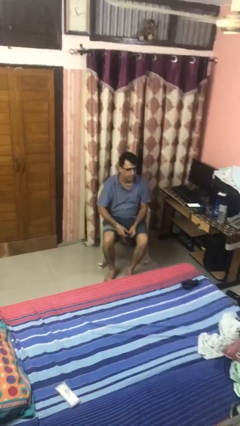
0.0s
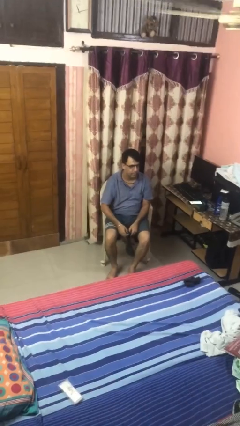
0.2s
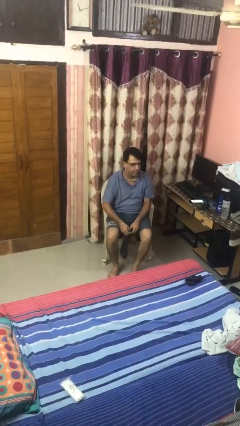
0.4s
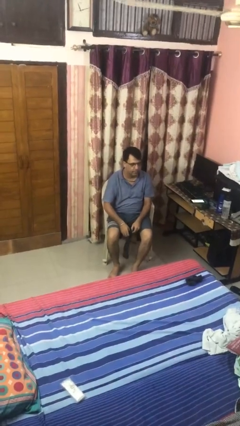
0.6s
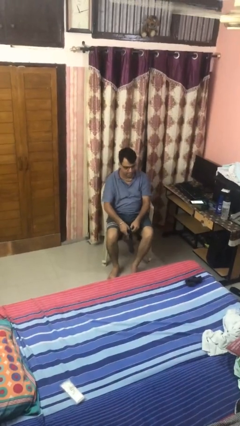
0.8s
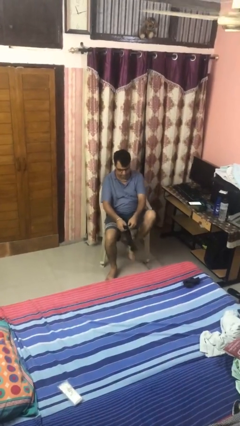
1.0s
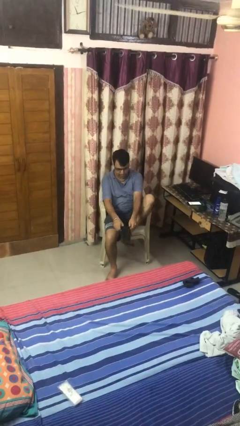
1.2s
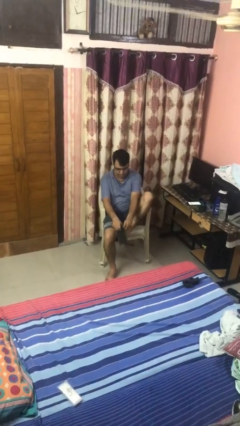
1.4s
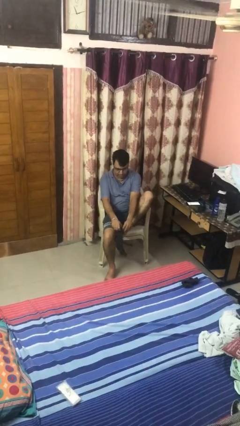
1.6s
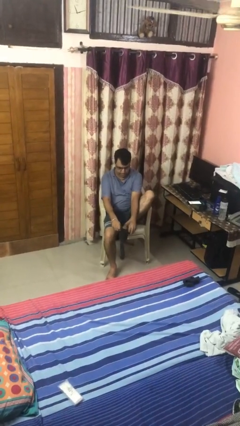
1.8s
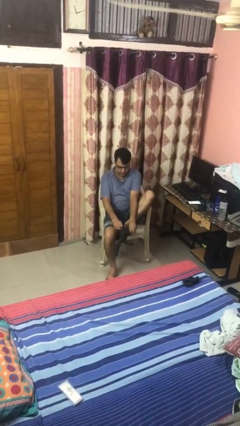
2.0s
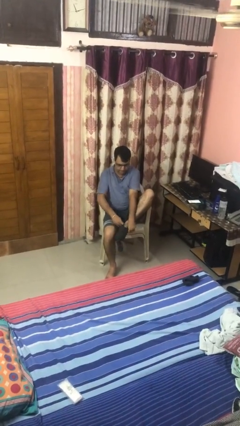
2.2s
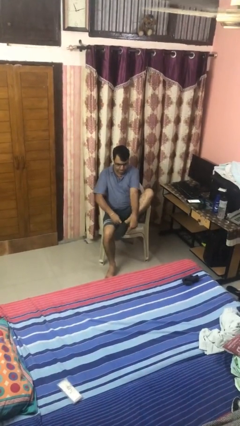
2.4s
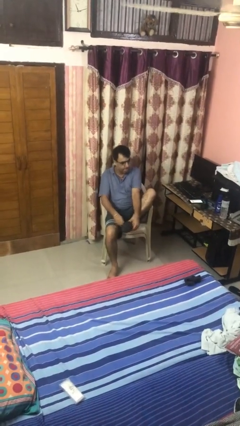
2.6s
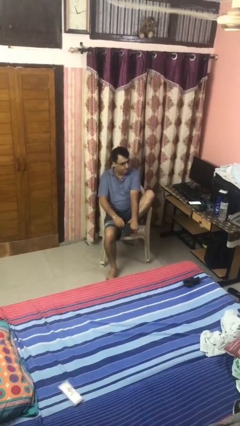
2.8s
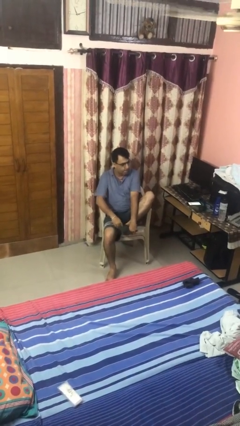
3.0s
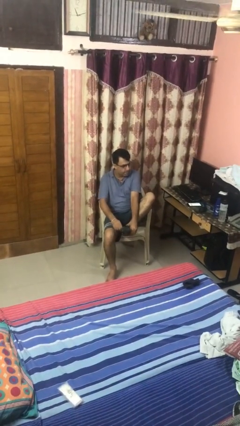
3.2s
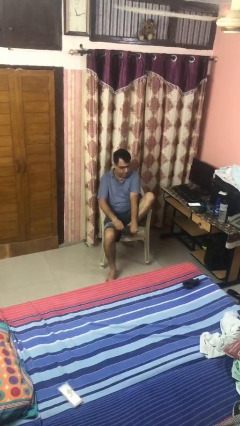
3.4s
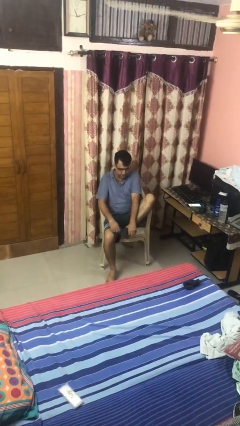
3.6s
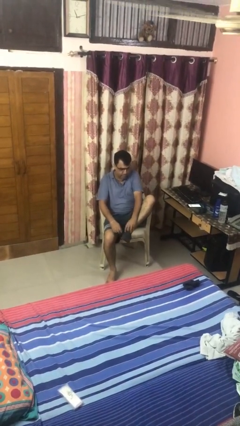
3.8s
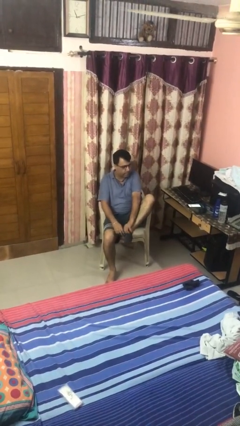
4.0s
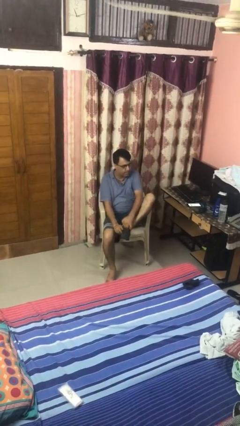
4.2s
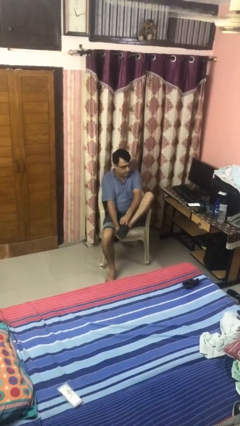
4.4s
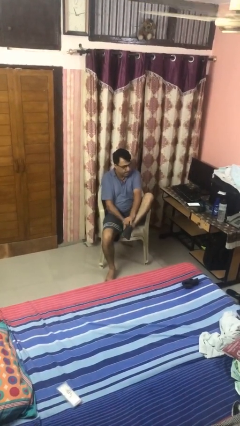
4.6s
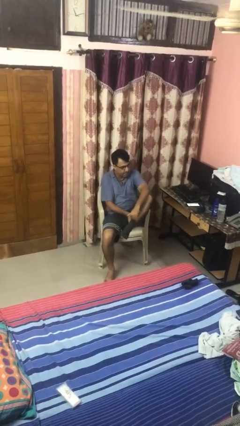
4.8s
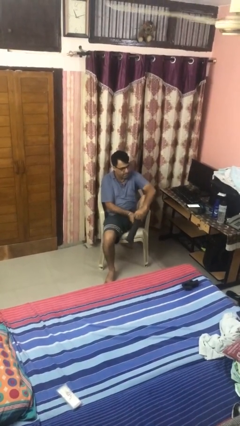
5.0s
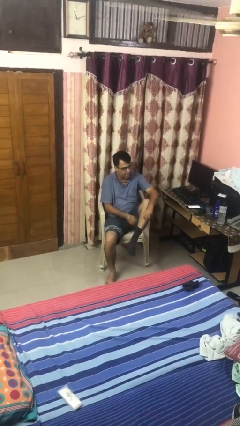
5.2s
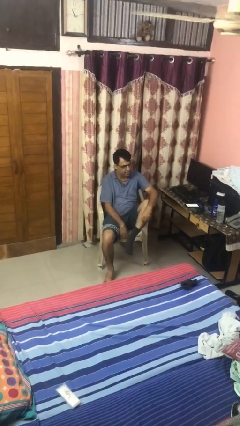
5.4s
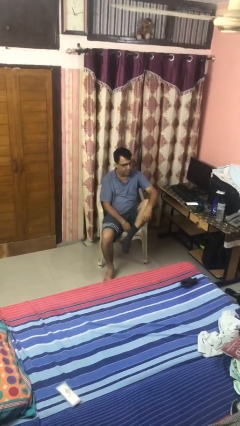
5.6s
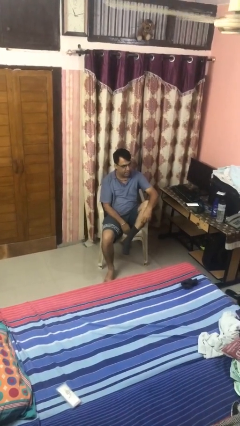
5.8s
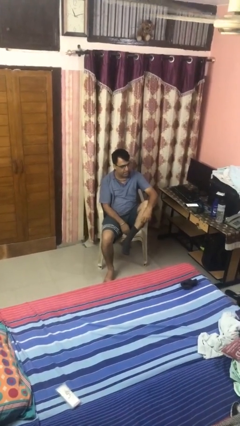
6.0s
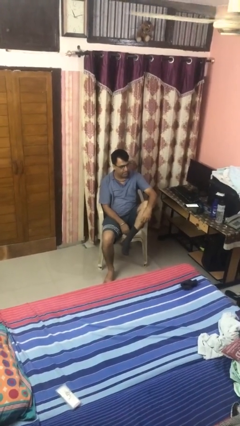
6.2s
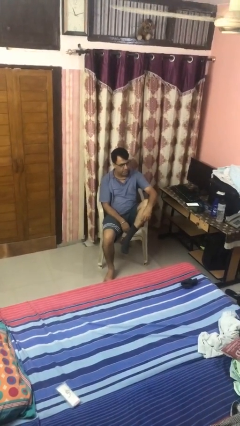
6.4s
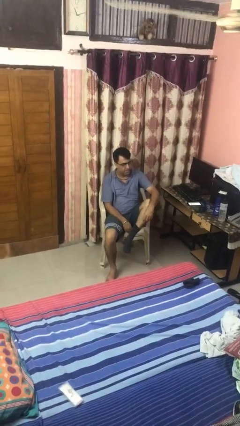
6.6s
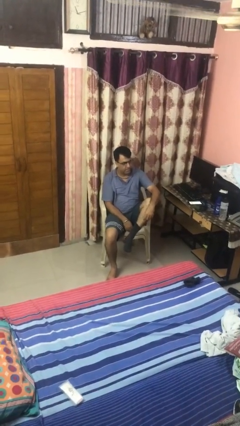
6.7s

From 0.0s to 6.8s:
person puts on socks

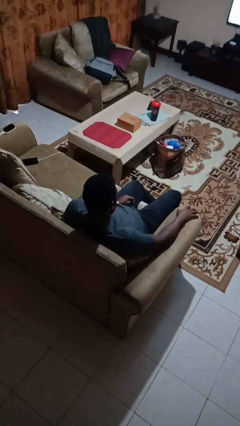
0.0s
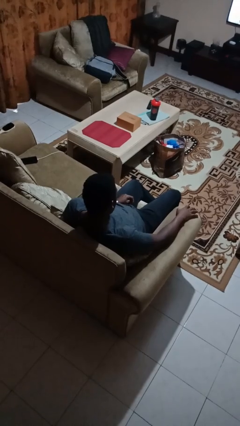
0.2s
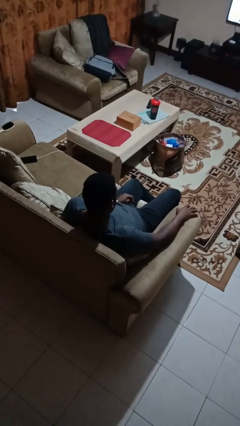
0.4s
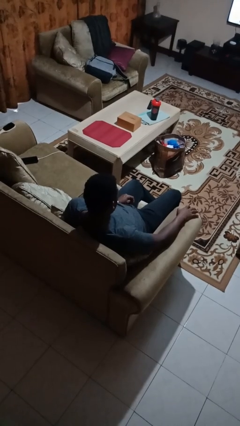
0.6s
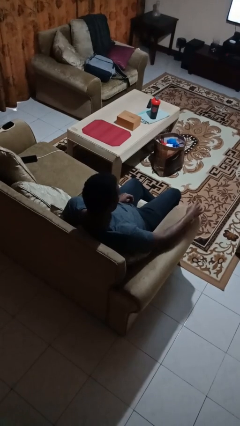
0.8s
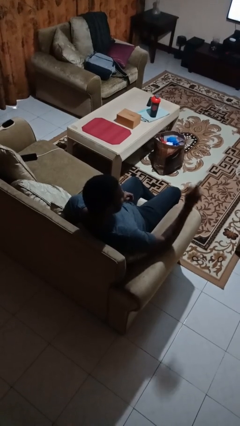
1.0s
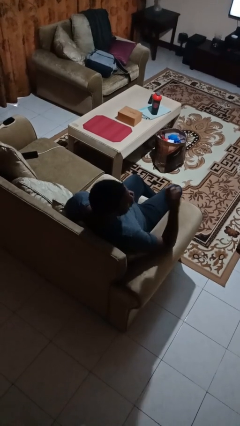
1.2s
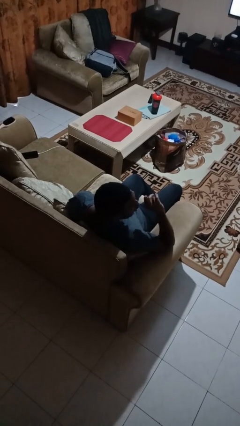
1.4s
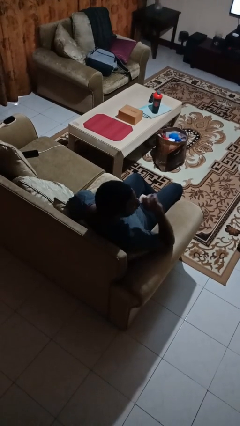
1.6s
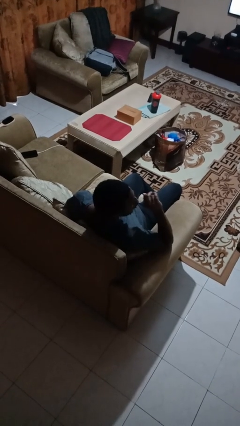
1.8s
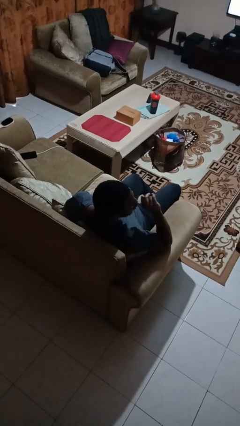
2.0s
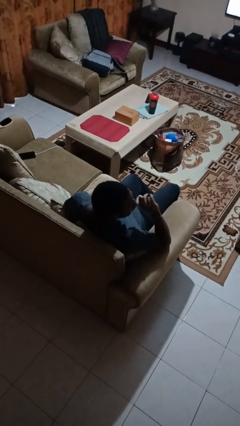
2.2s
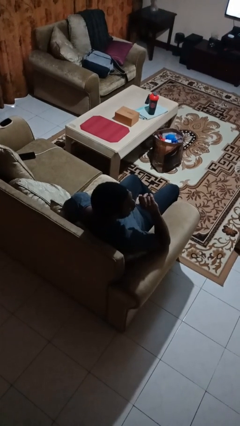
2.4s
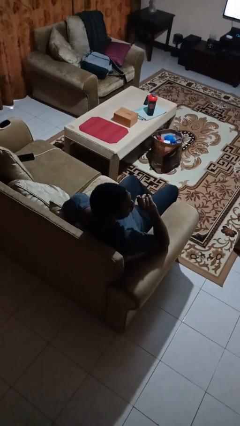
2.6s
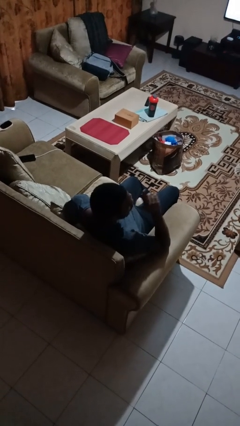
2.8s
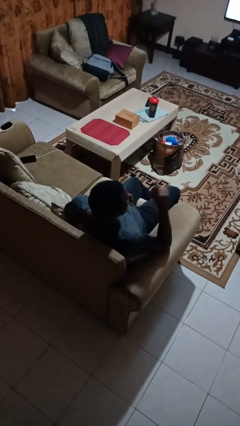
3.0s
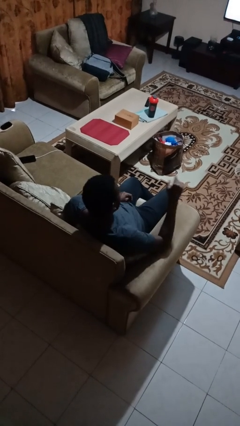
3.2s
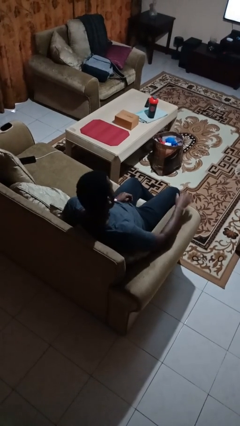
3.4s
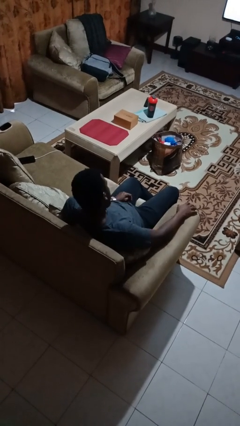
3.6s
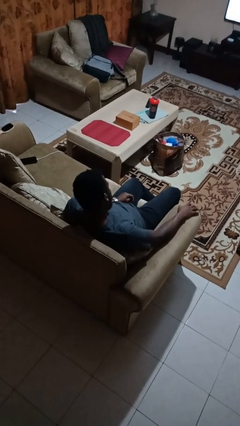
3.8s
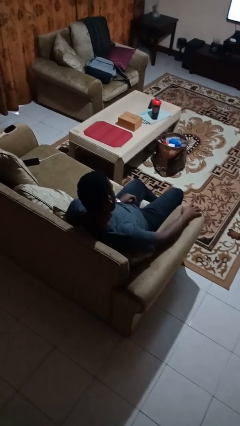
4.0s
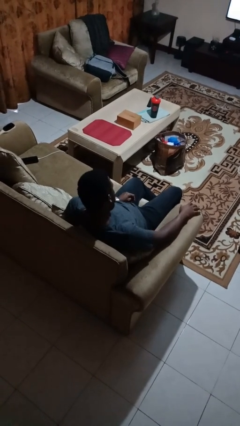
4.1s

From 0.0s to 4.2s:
person gestures be quiet

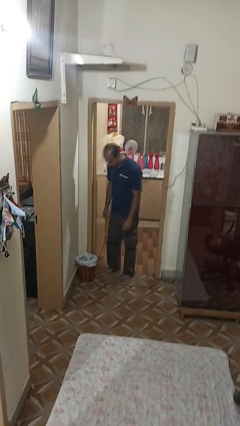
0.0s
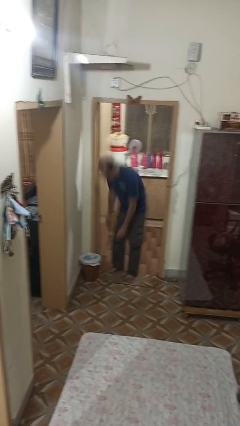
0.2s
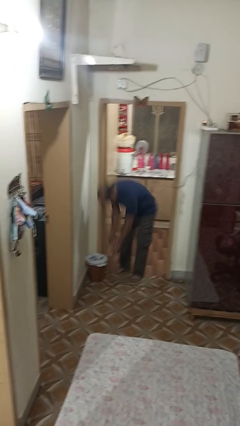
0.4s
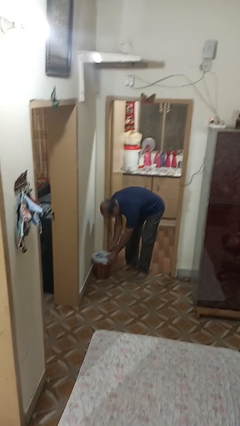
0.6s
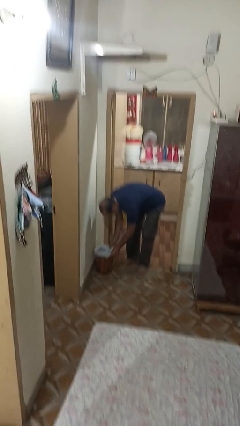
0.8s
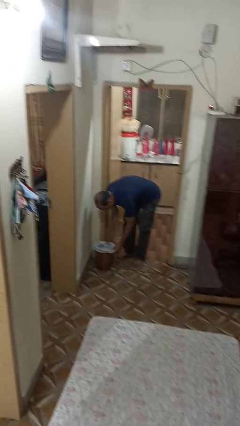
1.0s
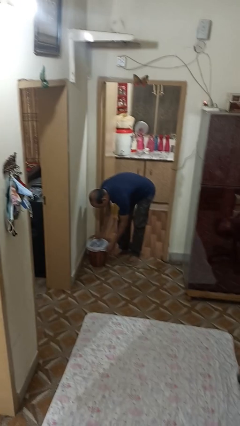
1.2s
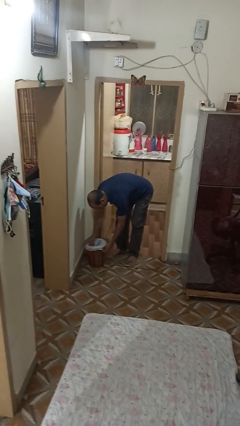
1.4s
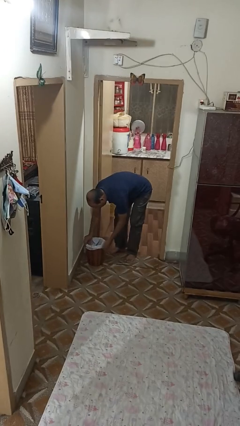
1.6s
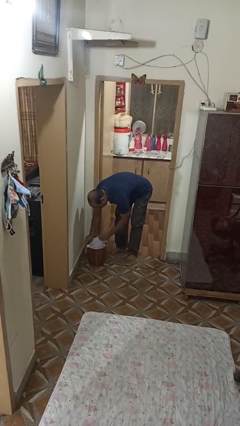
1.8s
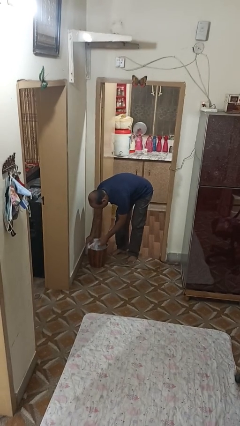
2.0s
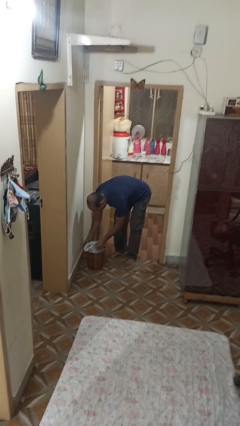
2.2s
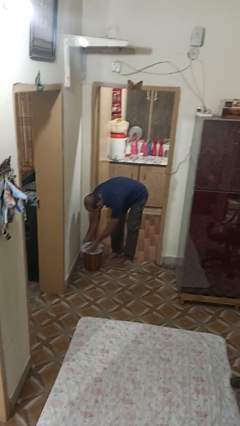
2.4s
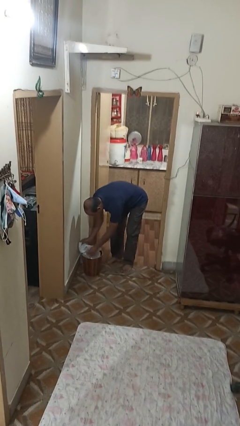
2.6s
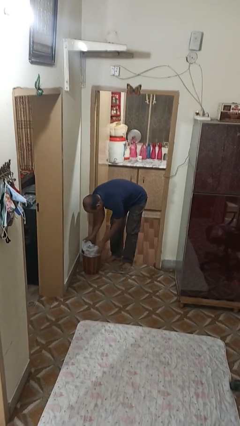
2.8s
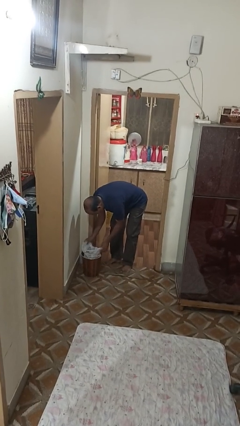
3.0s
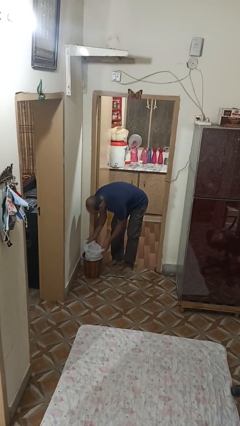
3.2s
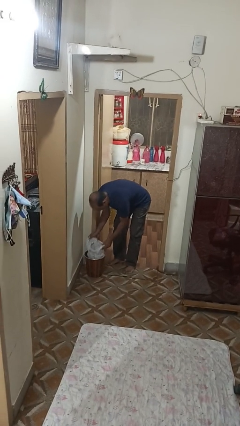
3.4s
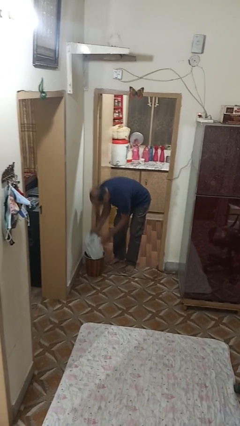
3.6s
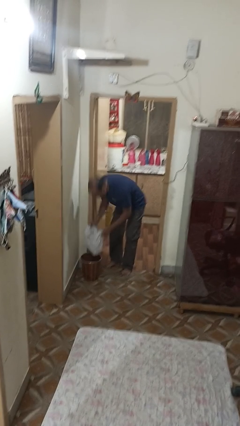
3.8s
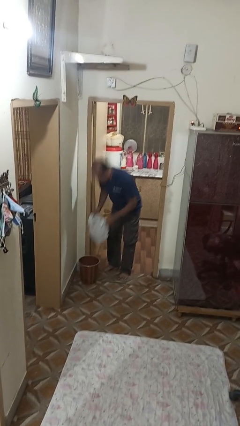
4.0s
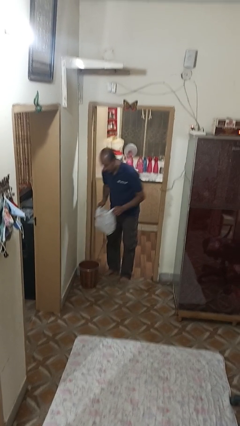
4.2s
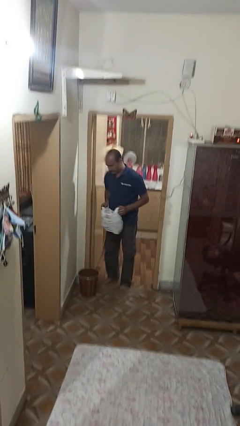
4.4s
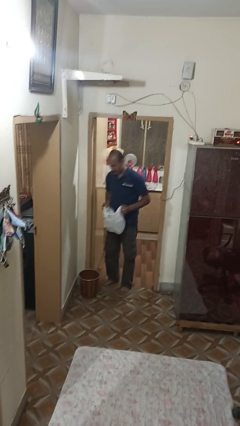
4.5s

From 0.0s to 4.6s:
person removes trashbag from trashcan

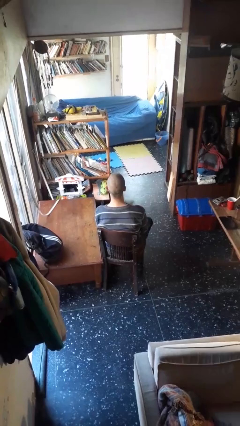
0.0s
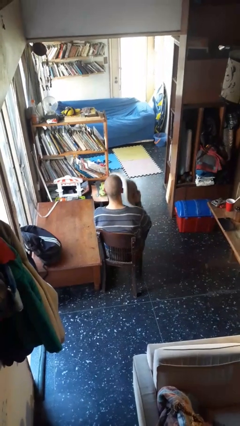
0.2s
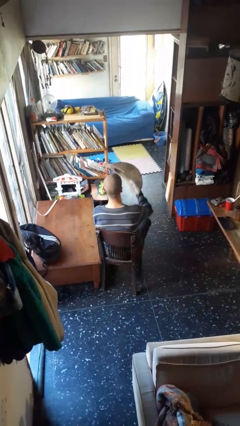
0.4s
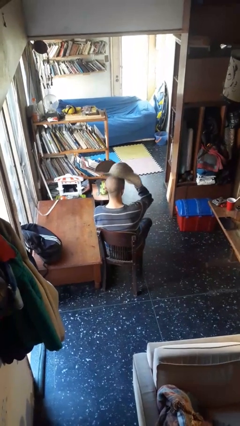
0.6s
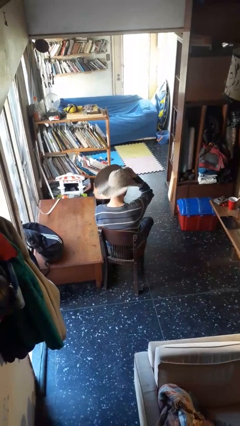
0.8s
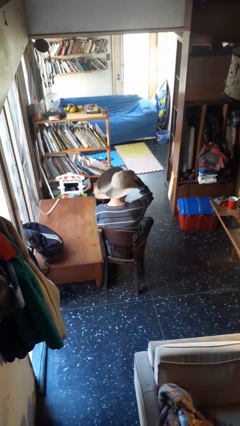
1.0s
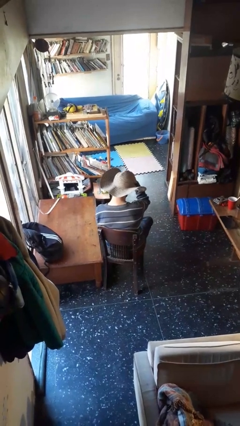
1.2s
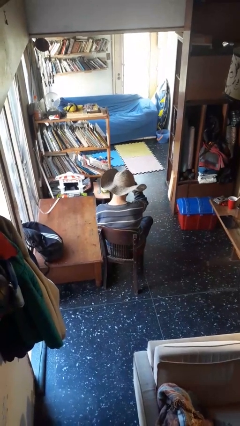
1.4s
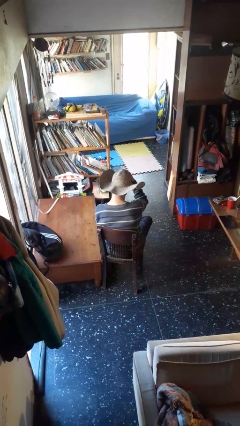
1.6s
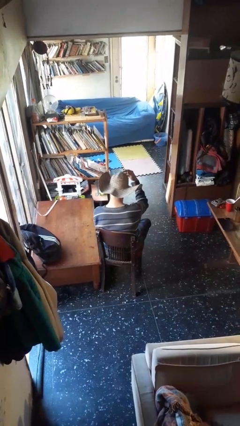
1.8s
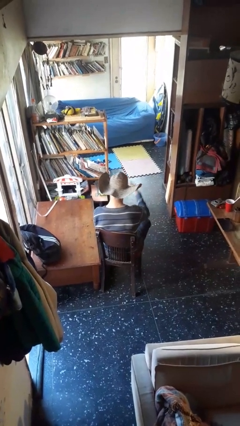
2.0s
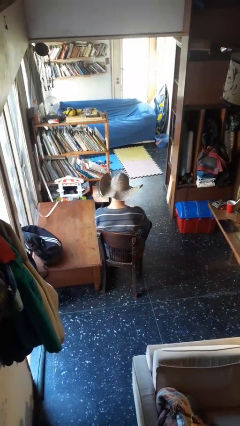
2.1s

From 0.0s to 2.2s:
person puts on hat
